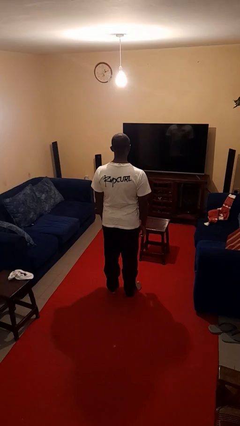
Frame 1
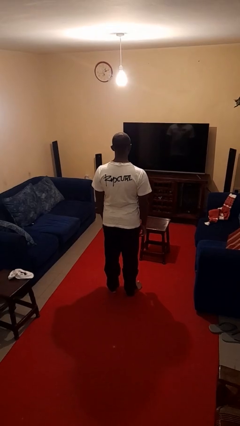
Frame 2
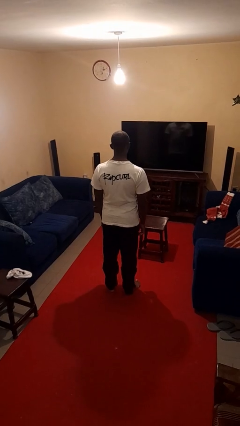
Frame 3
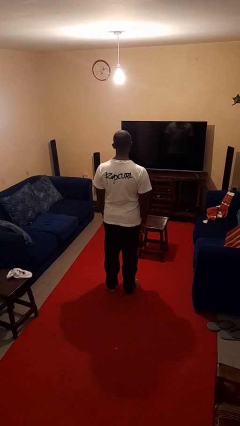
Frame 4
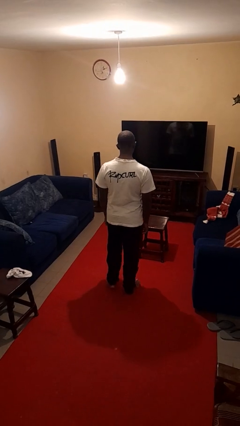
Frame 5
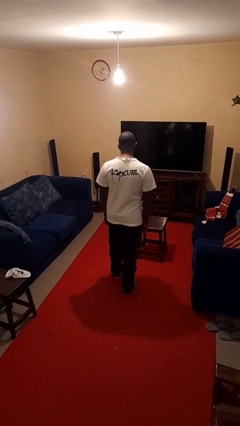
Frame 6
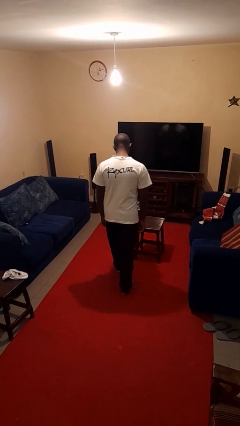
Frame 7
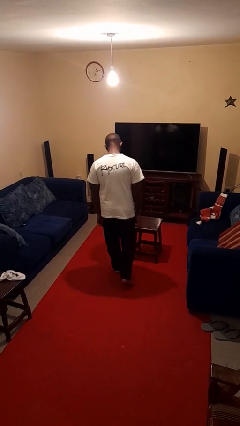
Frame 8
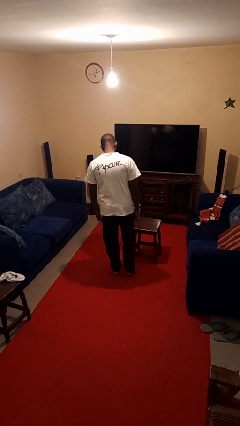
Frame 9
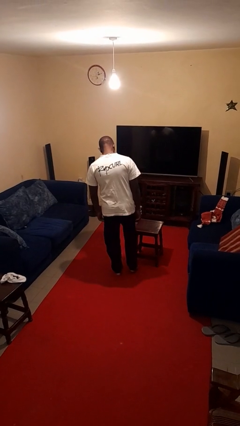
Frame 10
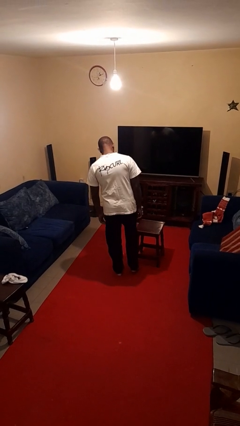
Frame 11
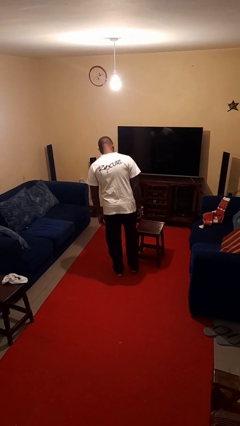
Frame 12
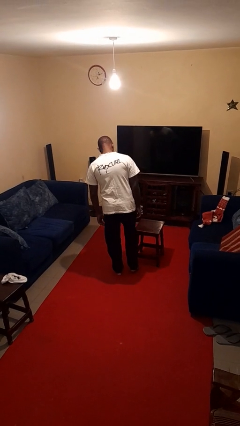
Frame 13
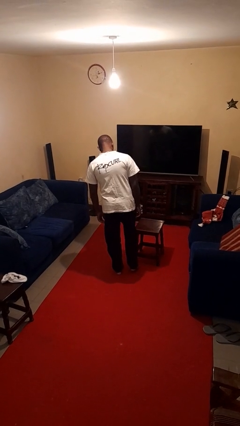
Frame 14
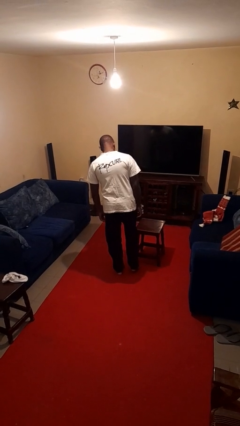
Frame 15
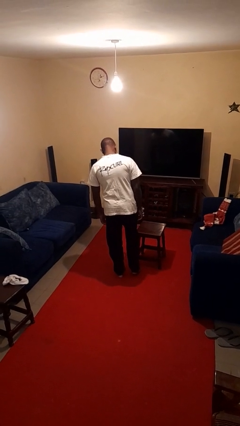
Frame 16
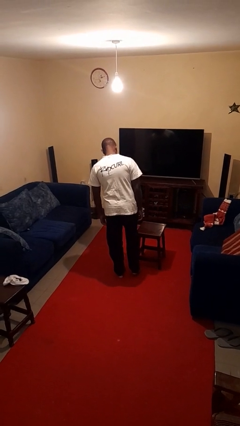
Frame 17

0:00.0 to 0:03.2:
person stubs toe

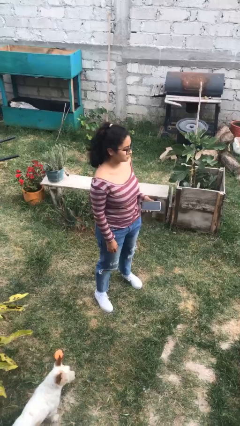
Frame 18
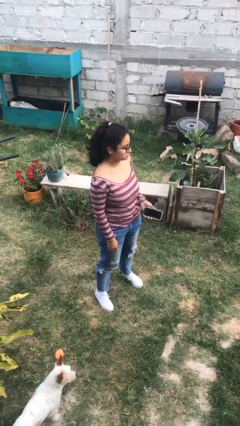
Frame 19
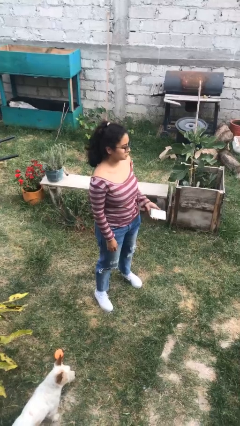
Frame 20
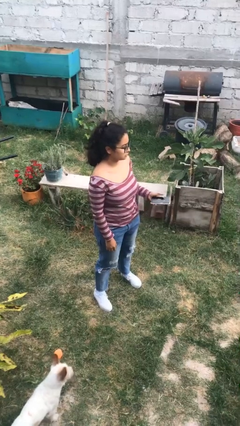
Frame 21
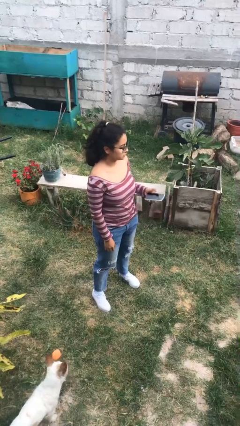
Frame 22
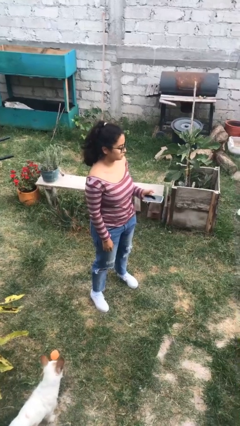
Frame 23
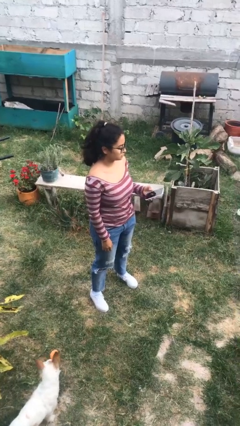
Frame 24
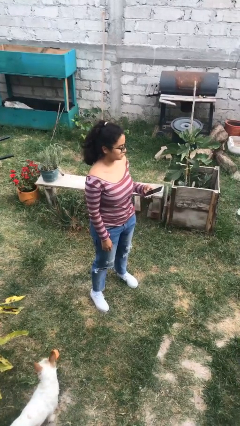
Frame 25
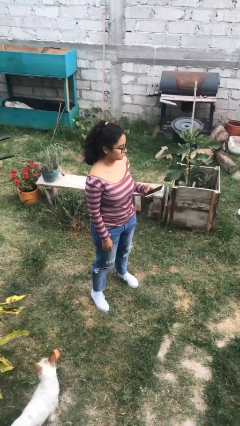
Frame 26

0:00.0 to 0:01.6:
person takes phone from pocket

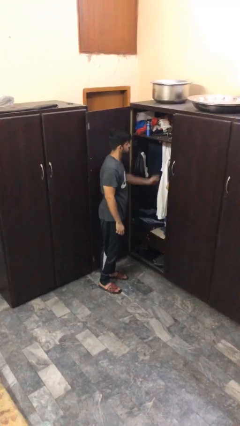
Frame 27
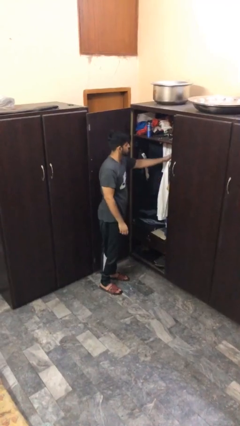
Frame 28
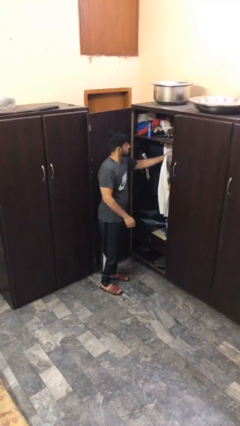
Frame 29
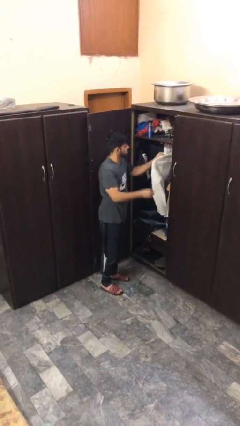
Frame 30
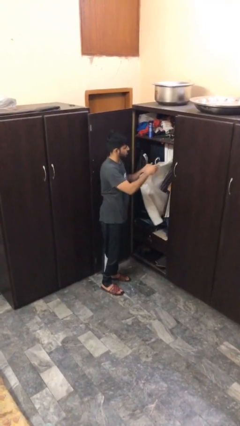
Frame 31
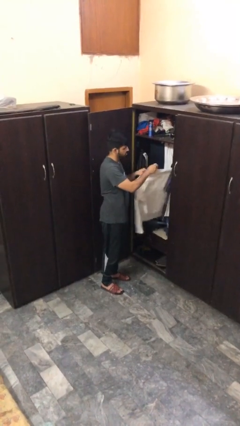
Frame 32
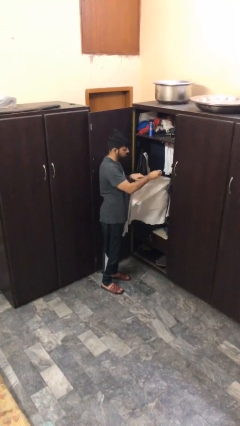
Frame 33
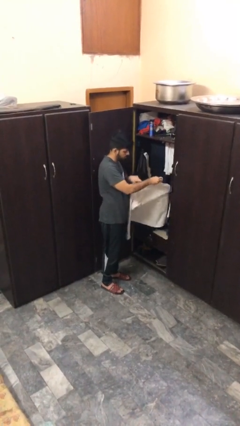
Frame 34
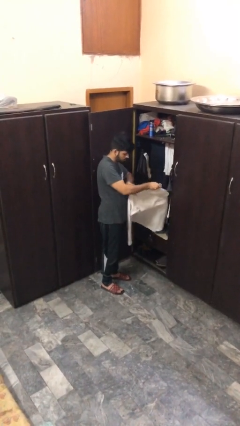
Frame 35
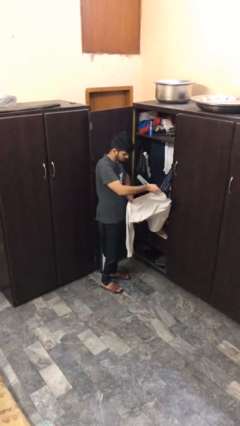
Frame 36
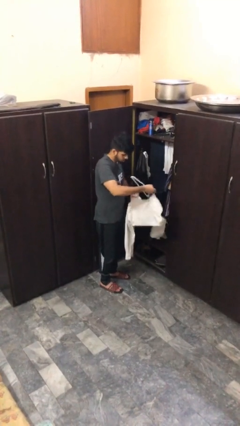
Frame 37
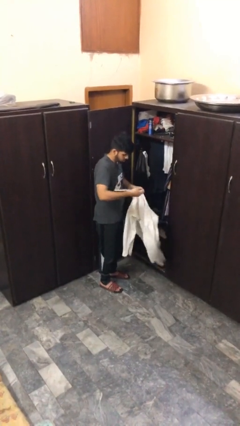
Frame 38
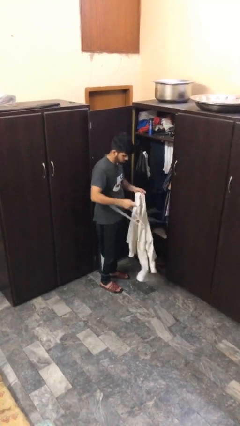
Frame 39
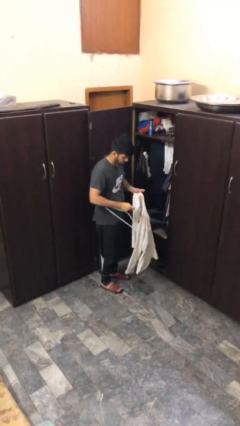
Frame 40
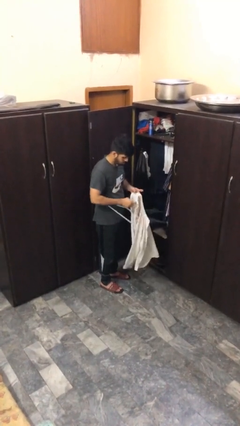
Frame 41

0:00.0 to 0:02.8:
person takes clothes from closet

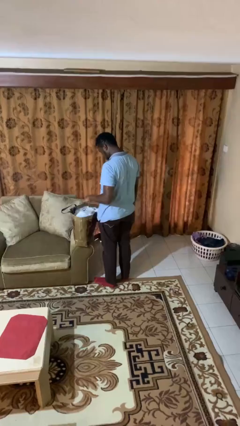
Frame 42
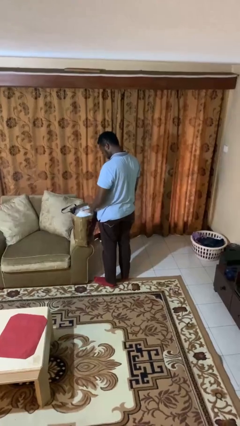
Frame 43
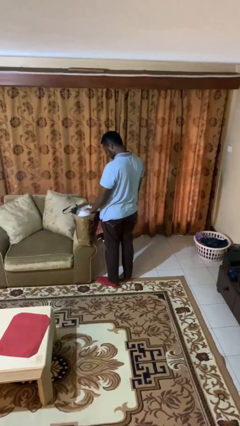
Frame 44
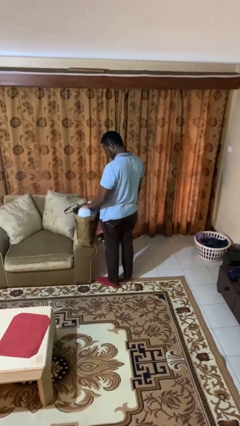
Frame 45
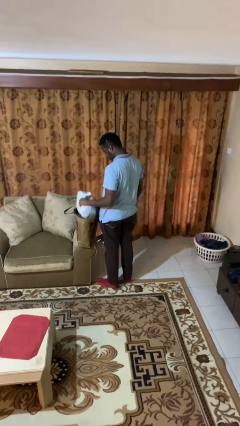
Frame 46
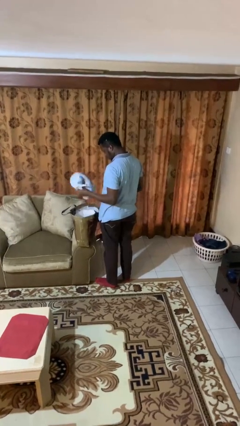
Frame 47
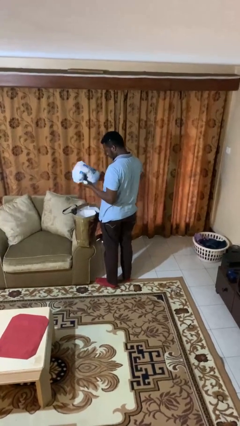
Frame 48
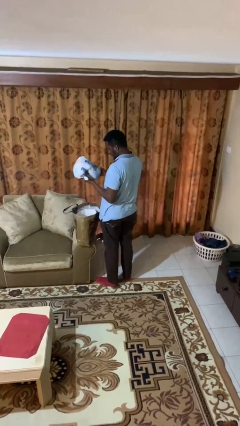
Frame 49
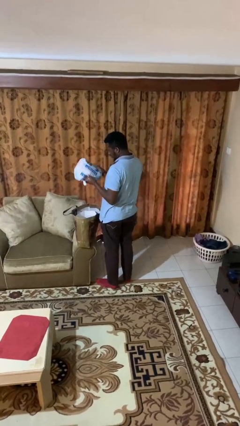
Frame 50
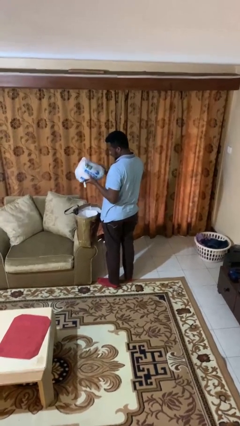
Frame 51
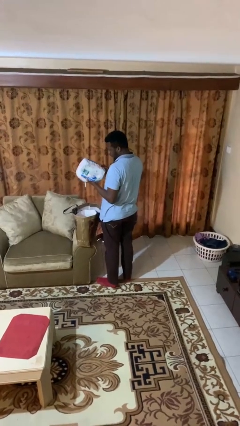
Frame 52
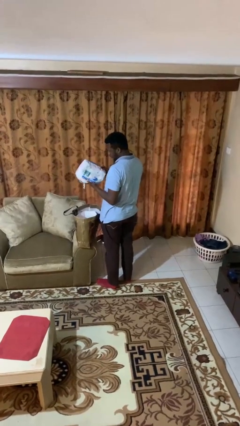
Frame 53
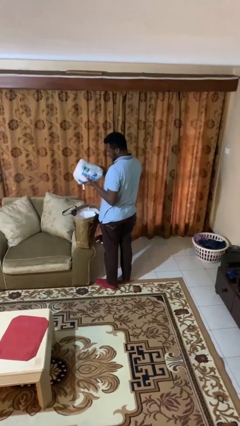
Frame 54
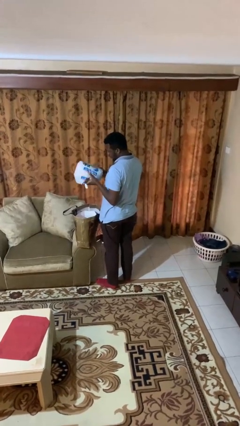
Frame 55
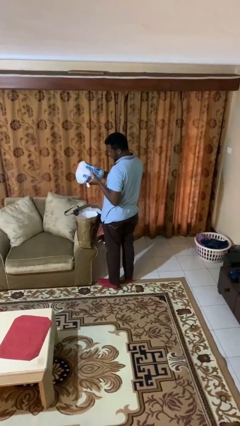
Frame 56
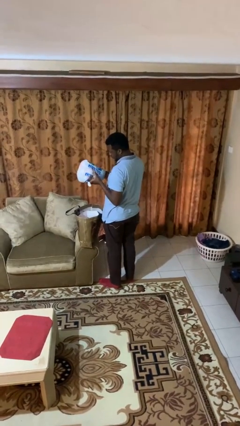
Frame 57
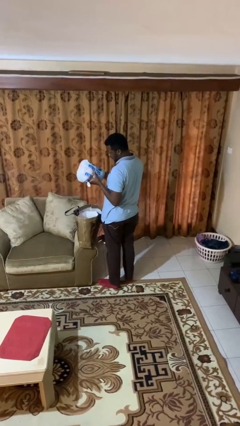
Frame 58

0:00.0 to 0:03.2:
person takes object from bag

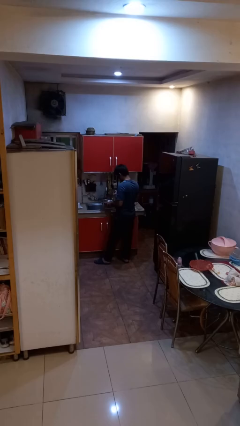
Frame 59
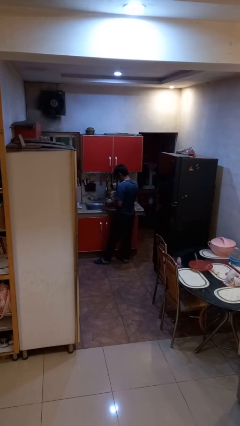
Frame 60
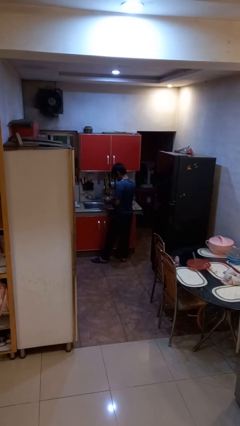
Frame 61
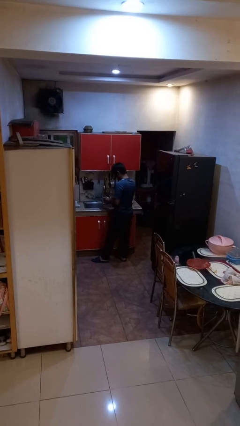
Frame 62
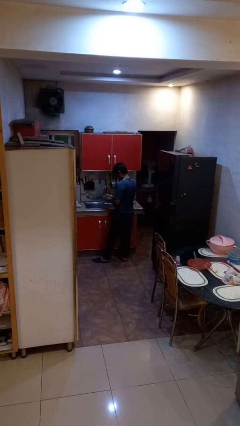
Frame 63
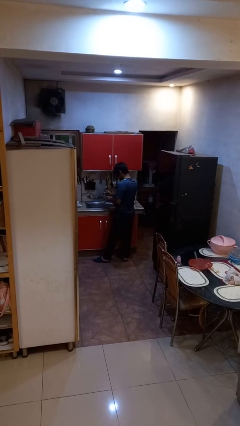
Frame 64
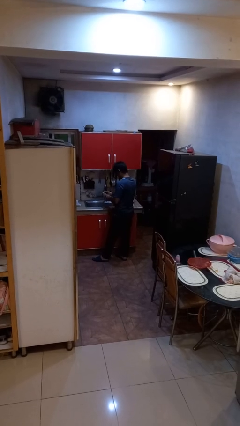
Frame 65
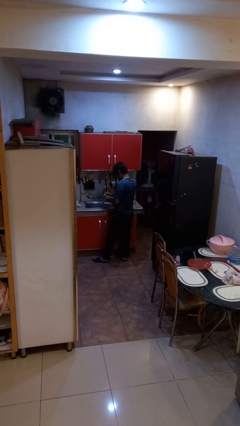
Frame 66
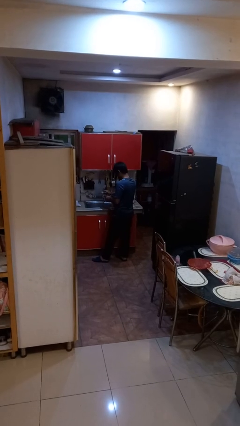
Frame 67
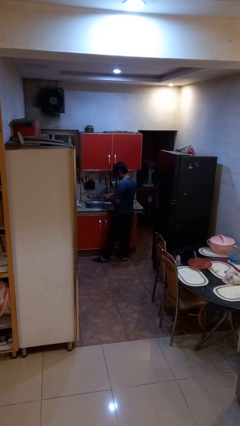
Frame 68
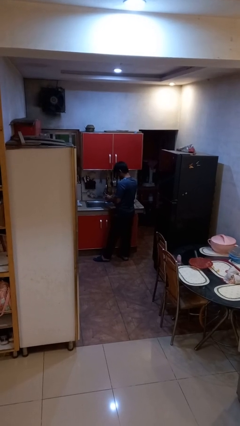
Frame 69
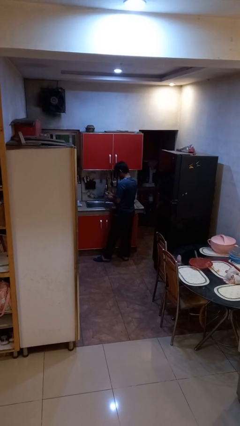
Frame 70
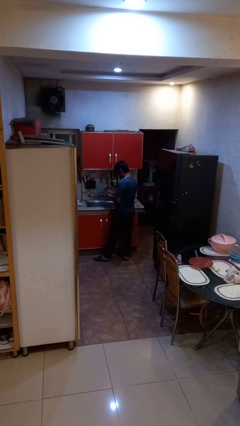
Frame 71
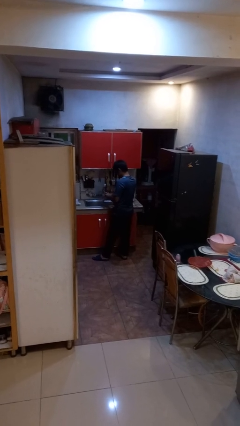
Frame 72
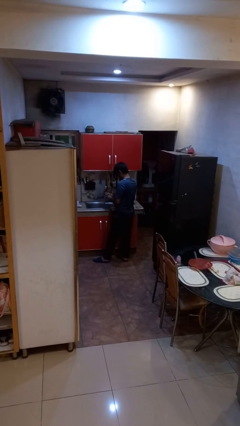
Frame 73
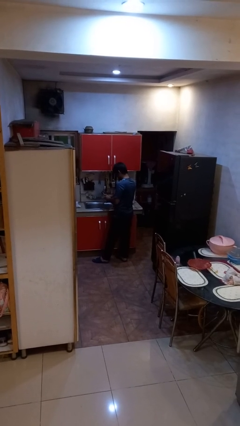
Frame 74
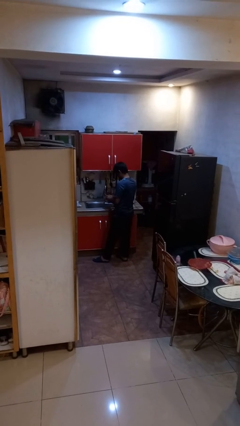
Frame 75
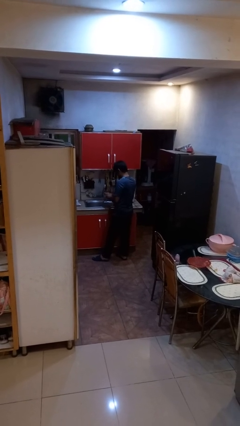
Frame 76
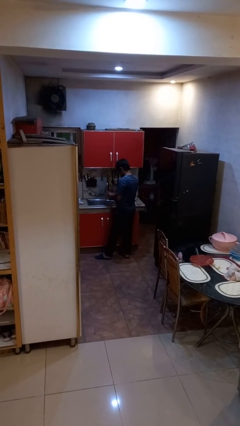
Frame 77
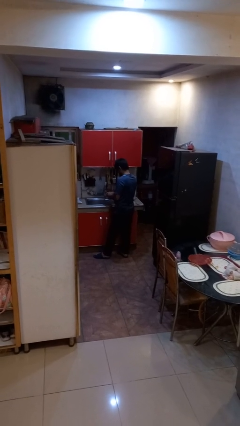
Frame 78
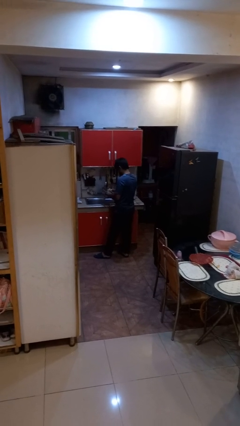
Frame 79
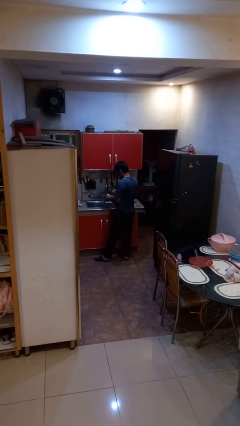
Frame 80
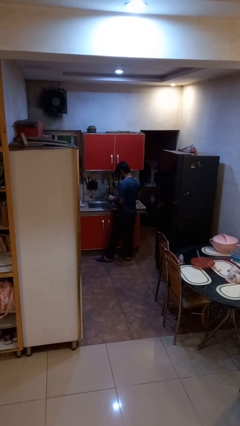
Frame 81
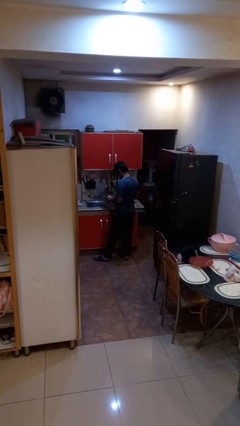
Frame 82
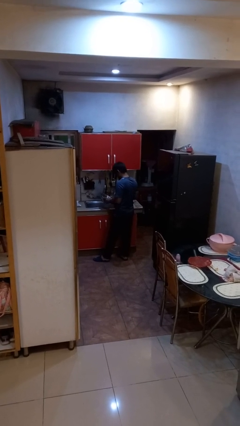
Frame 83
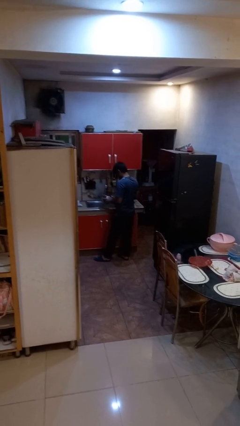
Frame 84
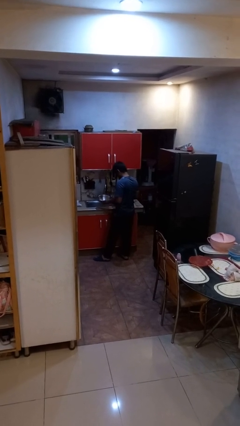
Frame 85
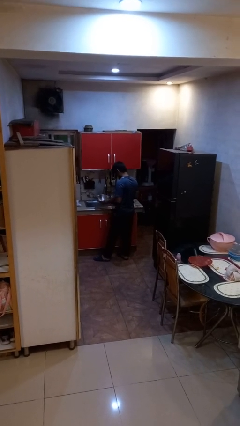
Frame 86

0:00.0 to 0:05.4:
person washes dish

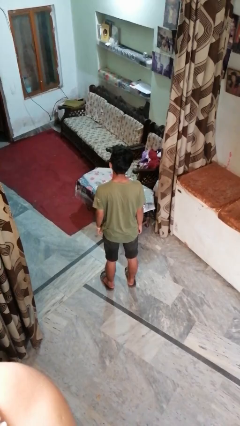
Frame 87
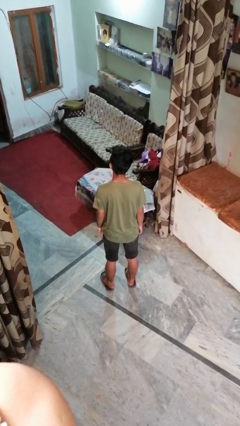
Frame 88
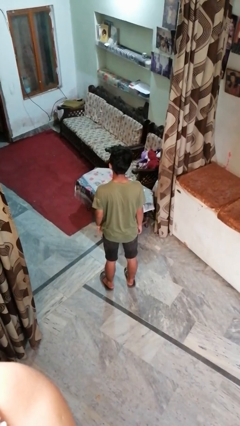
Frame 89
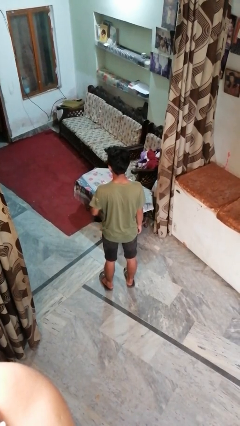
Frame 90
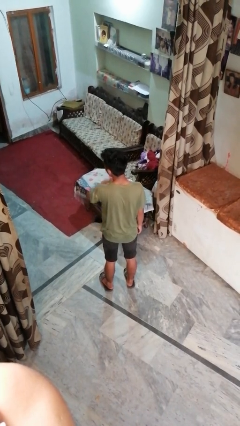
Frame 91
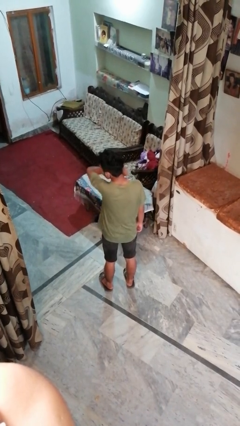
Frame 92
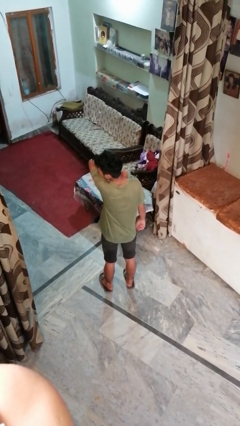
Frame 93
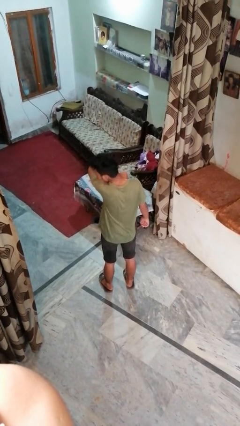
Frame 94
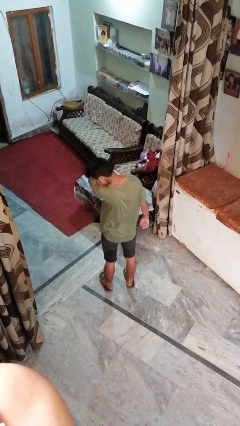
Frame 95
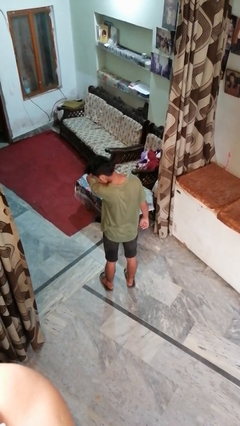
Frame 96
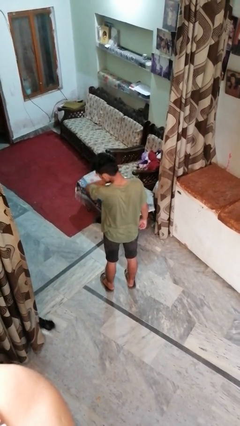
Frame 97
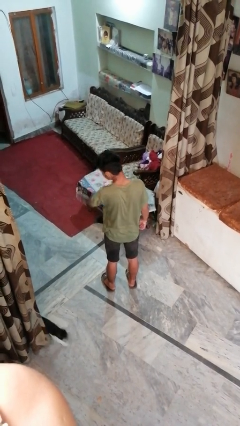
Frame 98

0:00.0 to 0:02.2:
person sneezes into arm
